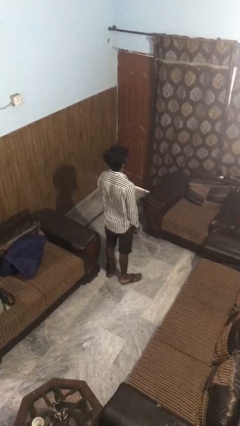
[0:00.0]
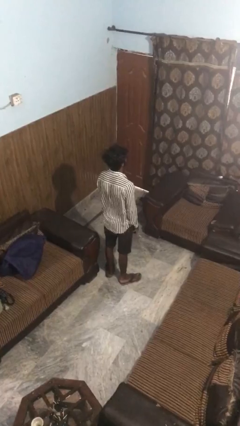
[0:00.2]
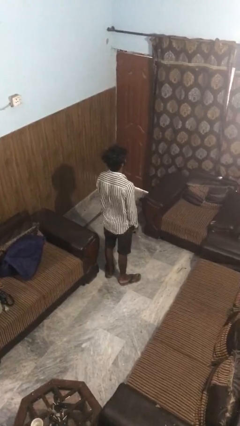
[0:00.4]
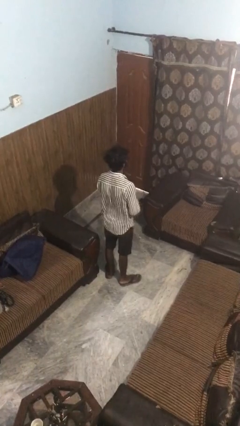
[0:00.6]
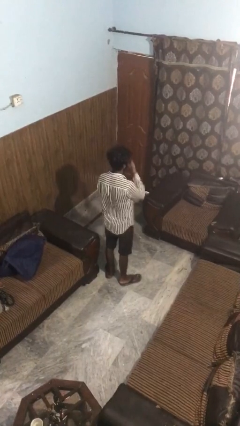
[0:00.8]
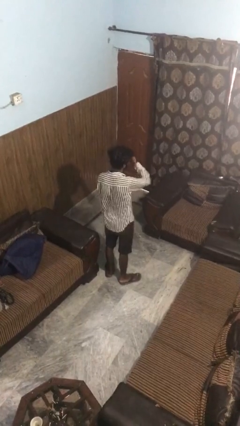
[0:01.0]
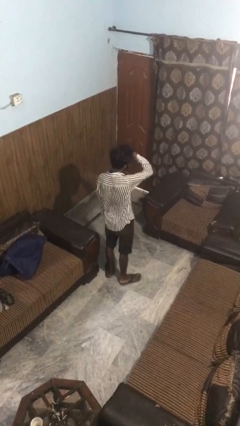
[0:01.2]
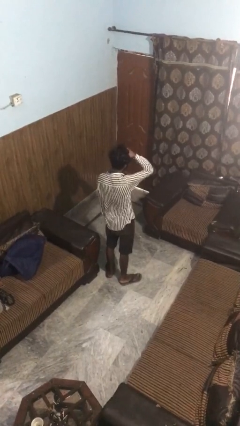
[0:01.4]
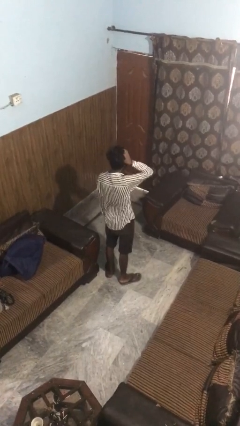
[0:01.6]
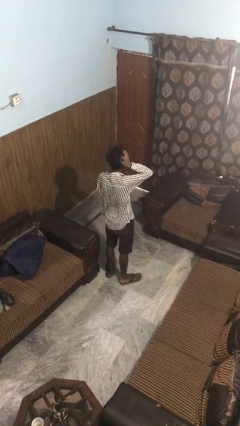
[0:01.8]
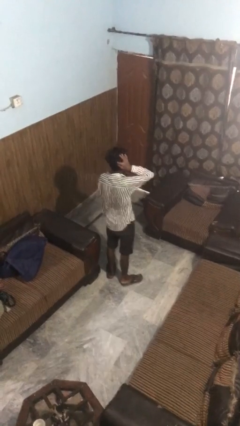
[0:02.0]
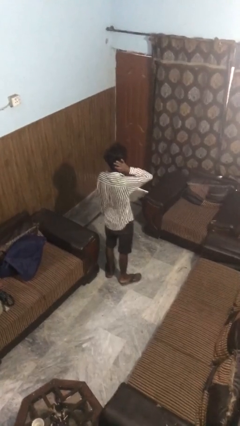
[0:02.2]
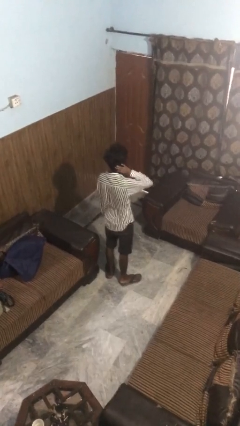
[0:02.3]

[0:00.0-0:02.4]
person strokes hair

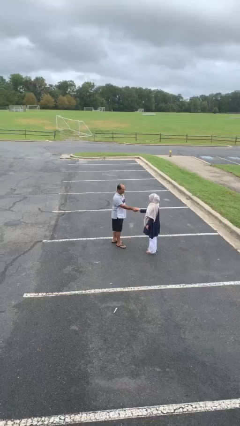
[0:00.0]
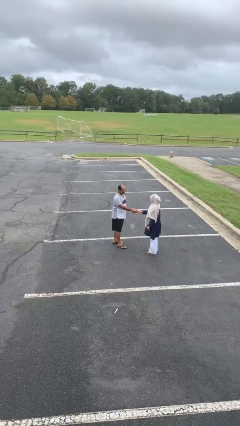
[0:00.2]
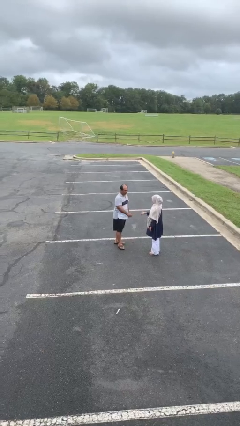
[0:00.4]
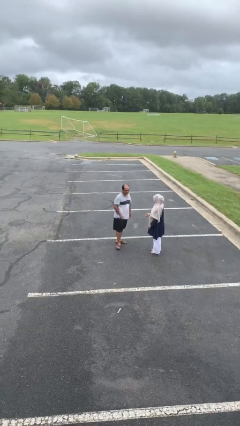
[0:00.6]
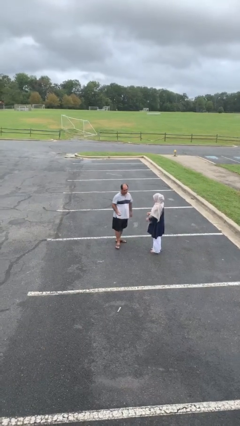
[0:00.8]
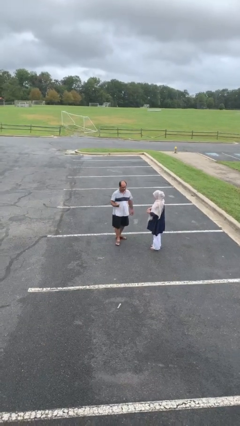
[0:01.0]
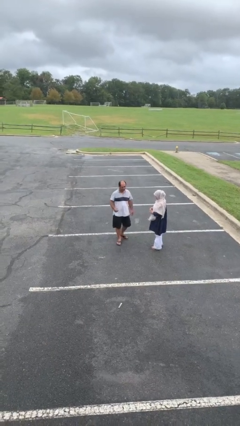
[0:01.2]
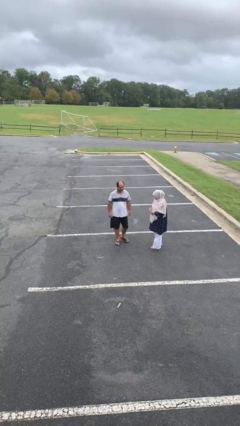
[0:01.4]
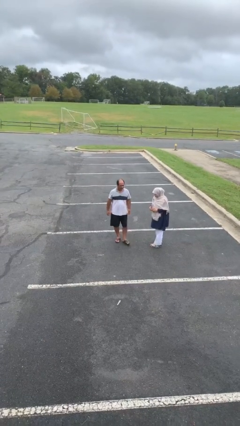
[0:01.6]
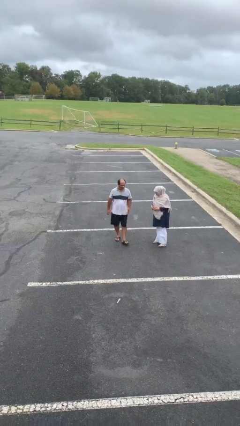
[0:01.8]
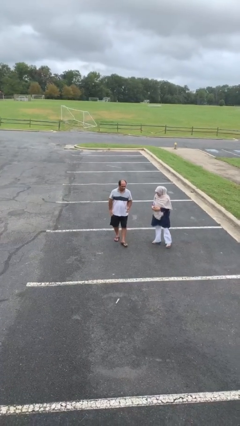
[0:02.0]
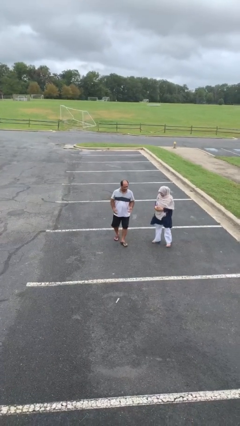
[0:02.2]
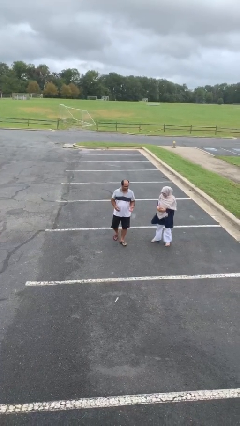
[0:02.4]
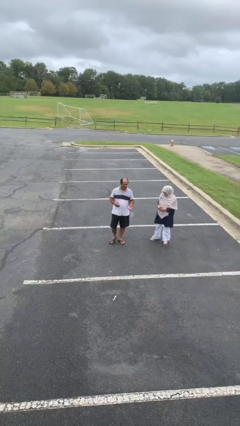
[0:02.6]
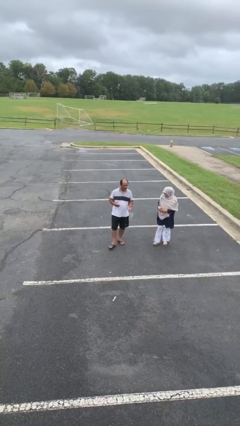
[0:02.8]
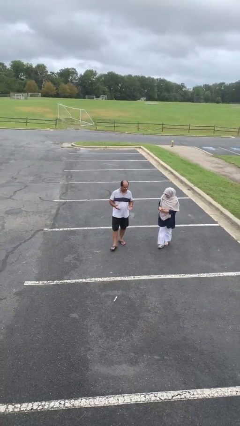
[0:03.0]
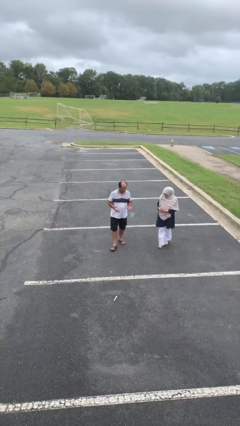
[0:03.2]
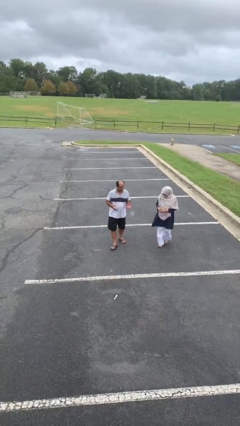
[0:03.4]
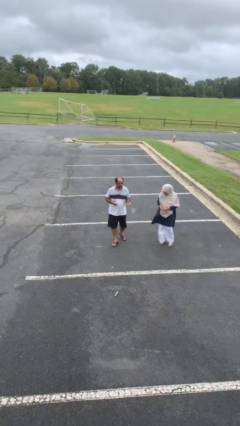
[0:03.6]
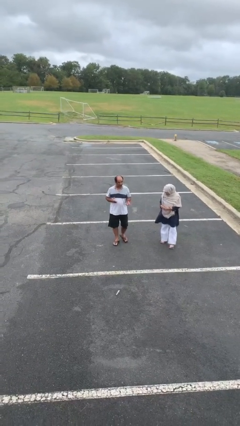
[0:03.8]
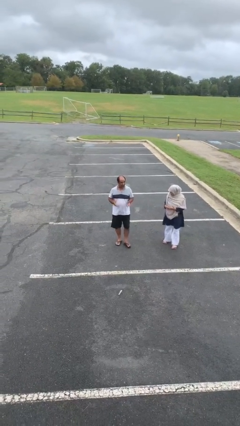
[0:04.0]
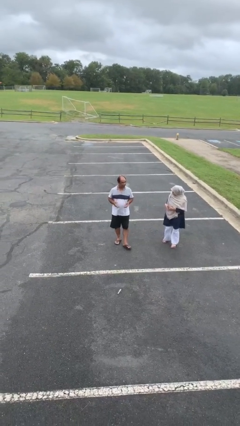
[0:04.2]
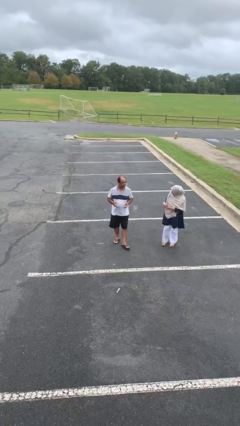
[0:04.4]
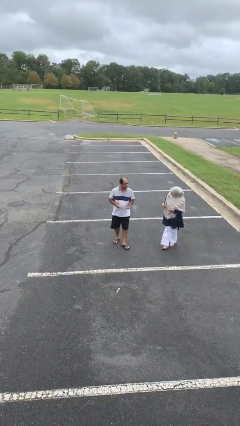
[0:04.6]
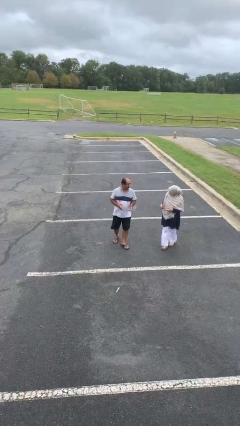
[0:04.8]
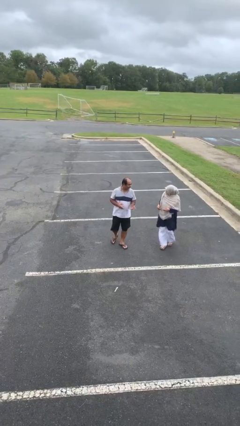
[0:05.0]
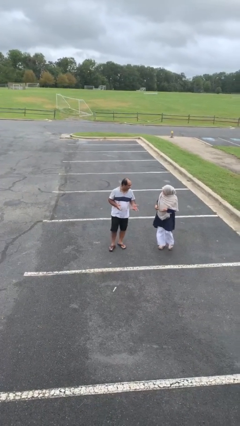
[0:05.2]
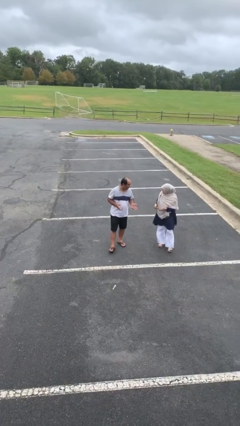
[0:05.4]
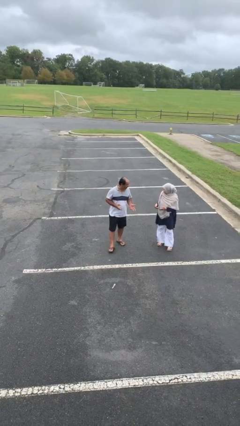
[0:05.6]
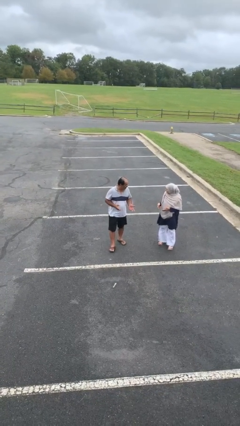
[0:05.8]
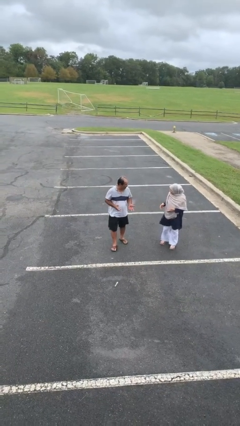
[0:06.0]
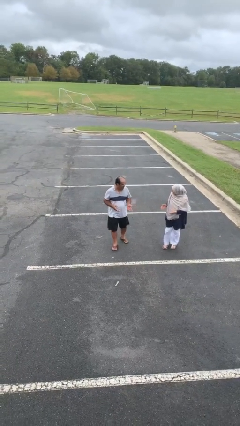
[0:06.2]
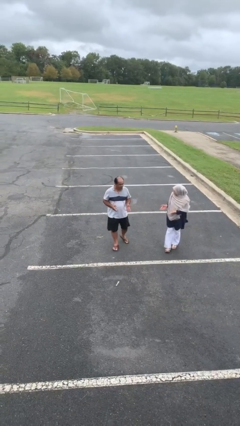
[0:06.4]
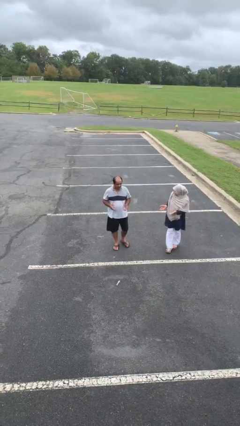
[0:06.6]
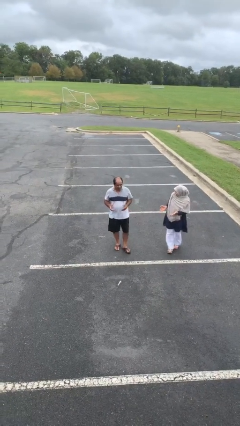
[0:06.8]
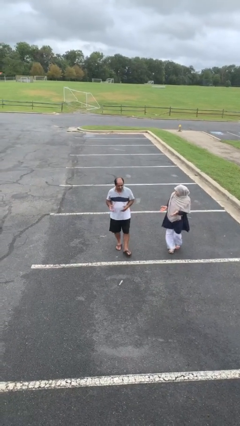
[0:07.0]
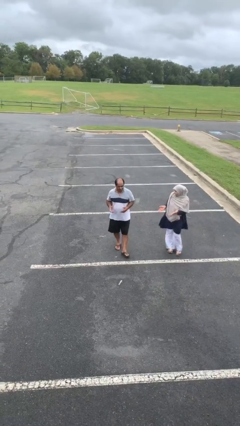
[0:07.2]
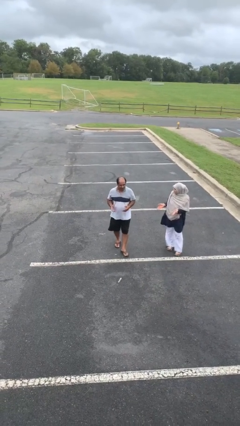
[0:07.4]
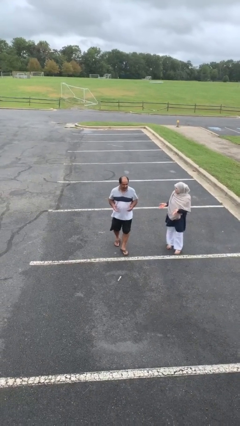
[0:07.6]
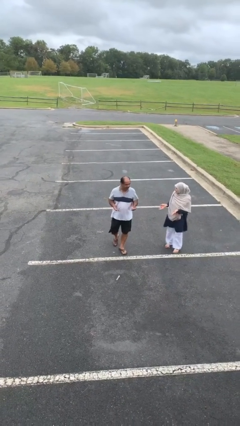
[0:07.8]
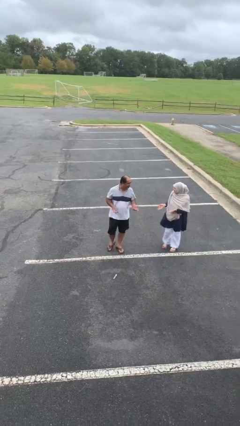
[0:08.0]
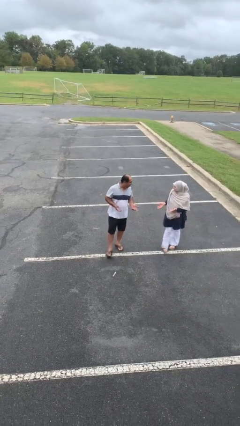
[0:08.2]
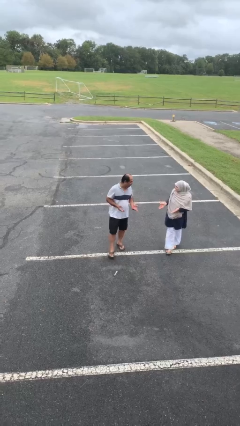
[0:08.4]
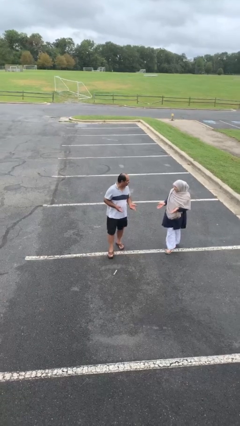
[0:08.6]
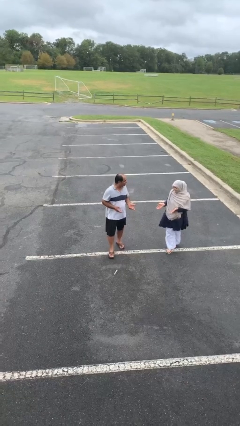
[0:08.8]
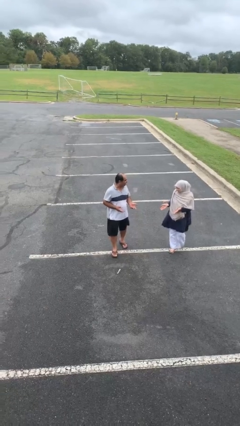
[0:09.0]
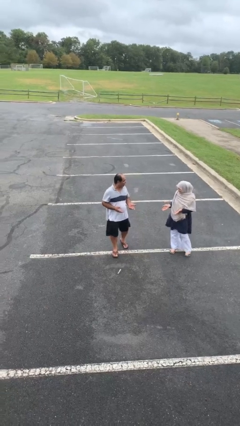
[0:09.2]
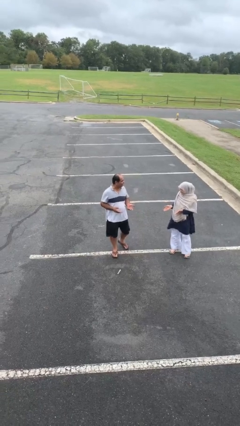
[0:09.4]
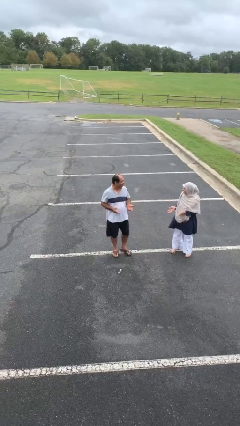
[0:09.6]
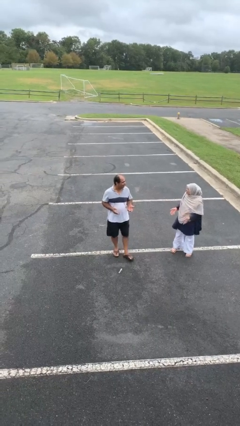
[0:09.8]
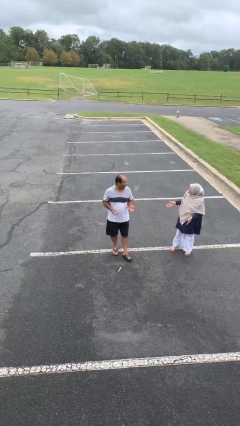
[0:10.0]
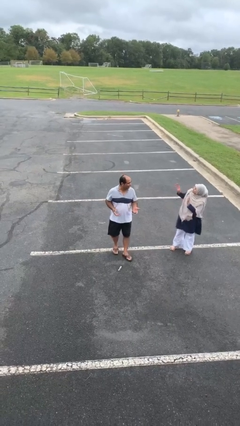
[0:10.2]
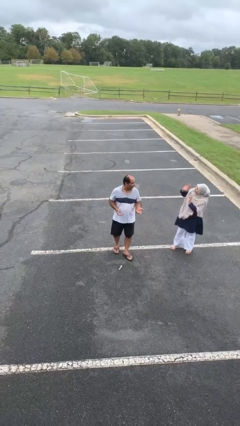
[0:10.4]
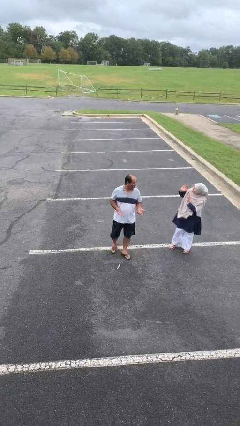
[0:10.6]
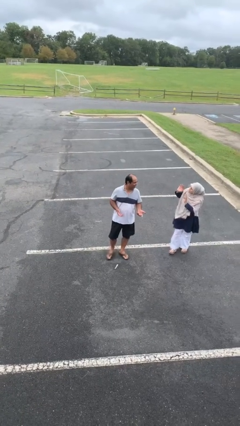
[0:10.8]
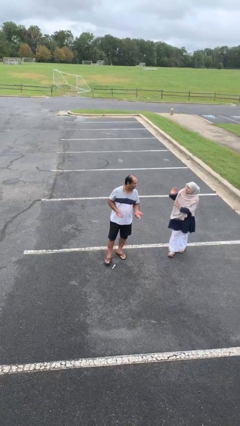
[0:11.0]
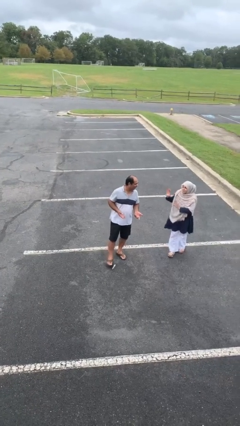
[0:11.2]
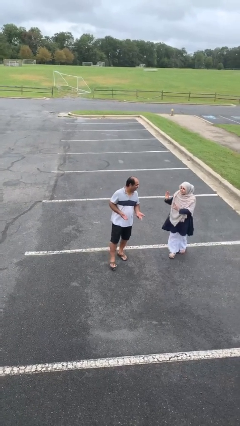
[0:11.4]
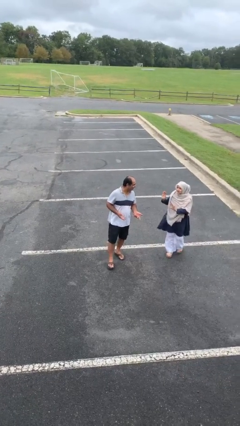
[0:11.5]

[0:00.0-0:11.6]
person talks to person

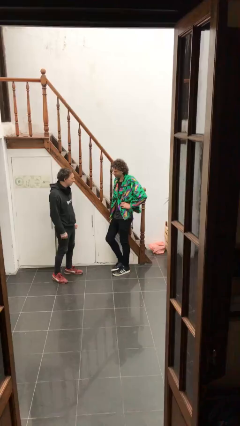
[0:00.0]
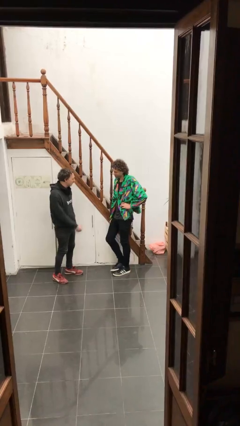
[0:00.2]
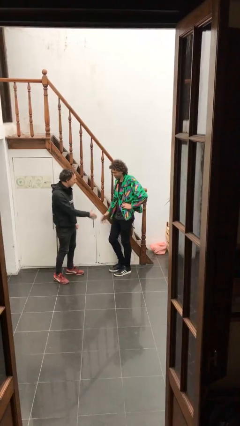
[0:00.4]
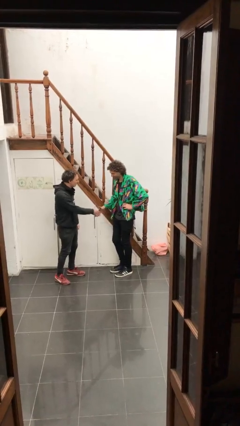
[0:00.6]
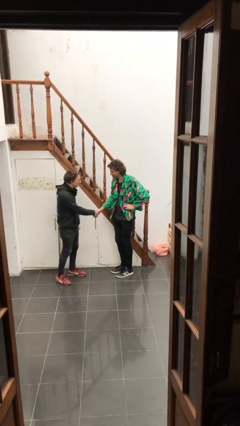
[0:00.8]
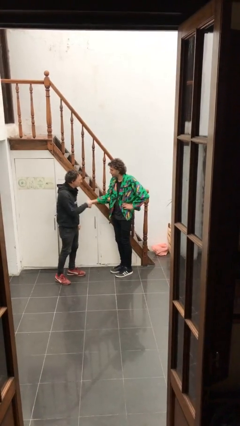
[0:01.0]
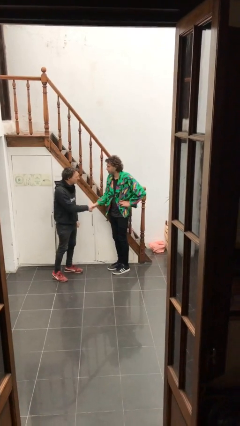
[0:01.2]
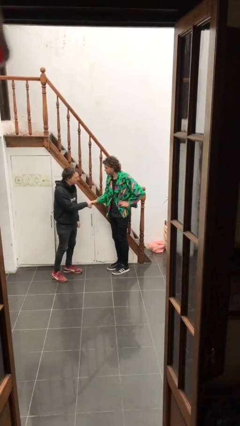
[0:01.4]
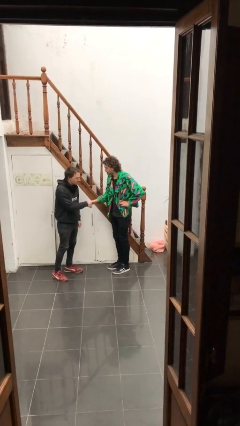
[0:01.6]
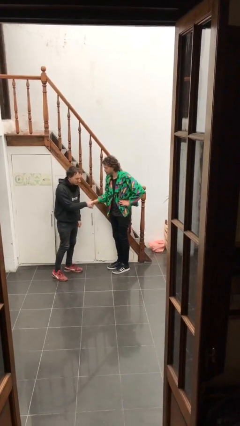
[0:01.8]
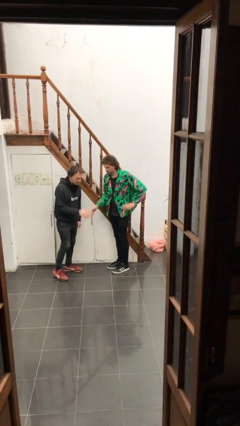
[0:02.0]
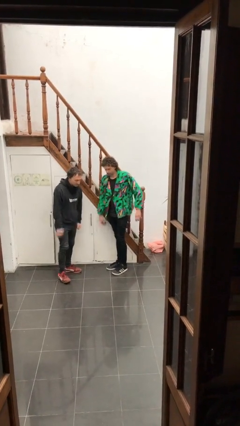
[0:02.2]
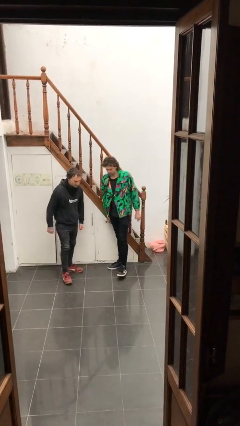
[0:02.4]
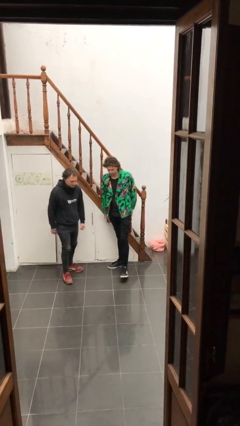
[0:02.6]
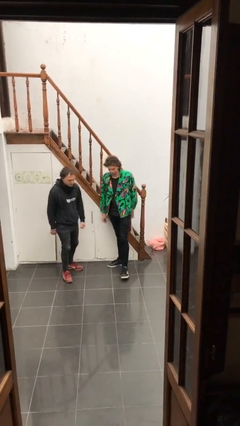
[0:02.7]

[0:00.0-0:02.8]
person shakes hand

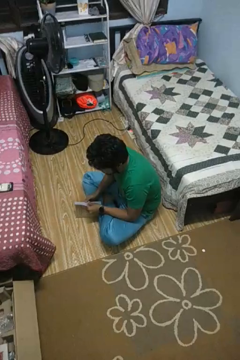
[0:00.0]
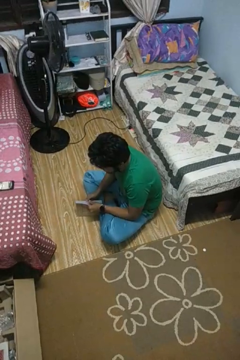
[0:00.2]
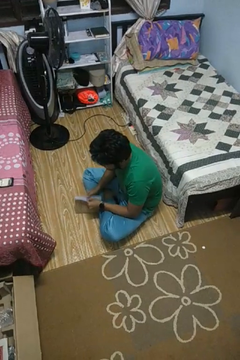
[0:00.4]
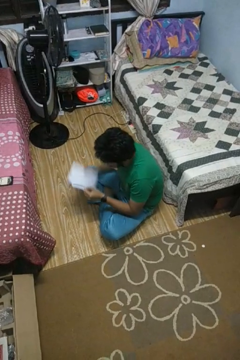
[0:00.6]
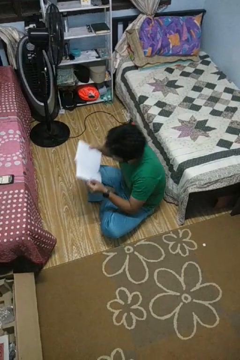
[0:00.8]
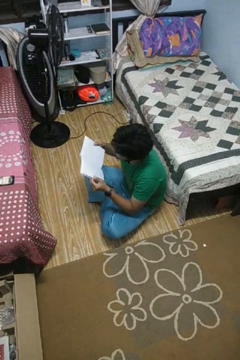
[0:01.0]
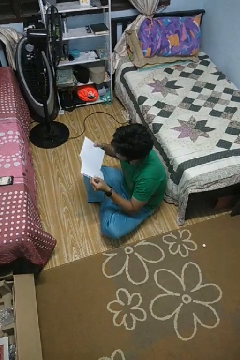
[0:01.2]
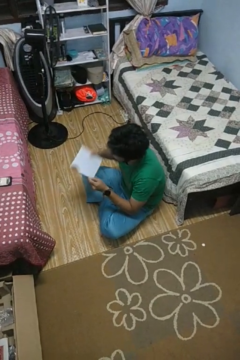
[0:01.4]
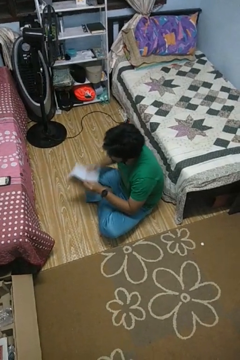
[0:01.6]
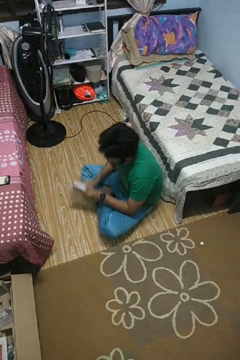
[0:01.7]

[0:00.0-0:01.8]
person reads book
